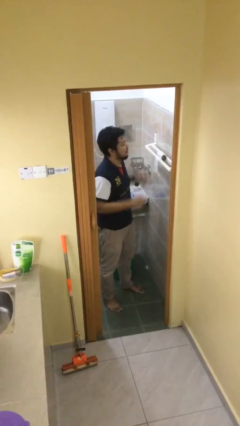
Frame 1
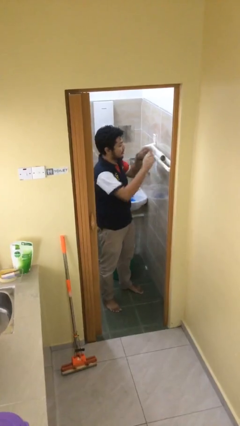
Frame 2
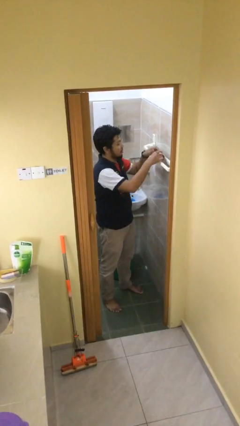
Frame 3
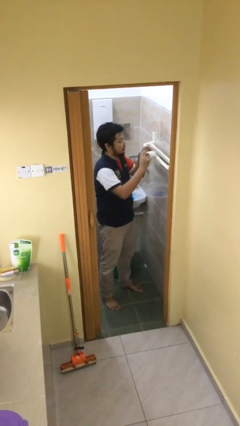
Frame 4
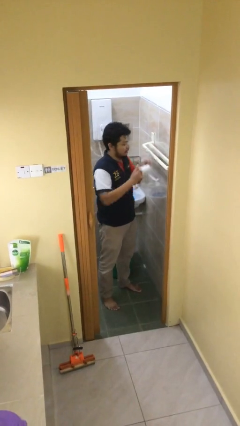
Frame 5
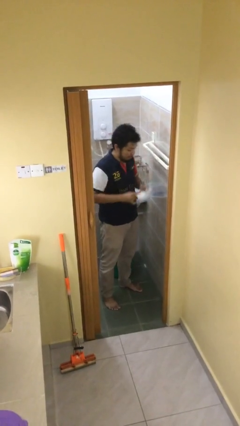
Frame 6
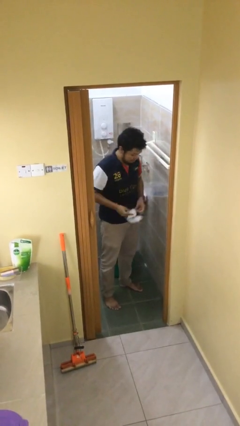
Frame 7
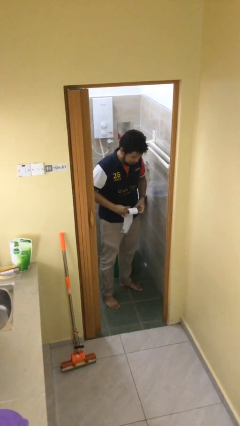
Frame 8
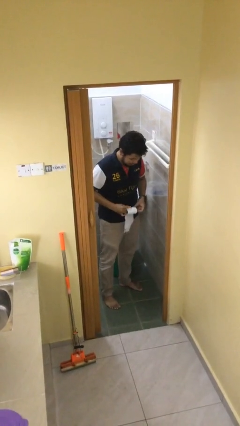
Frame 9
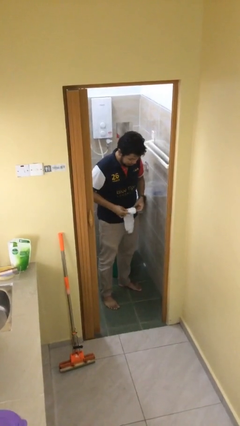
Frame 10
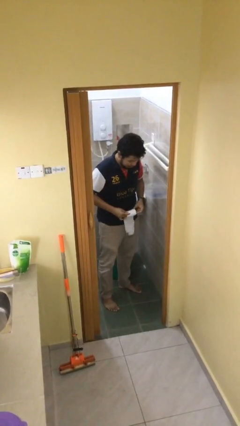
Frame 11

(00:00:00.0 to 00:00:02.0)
person picks up object from countertop

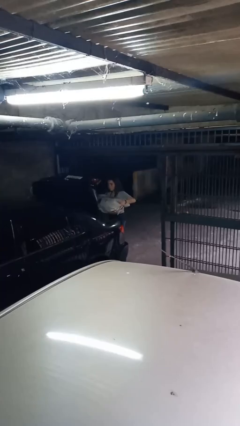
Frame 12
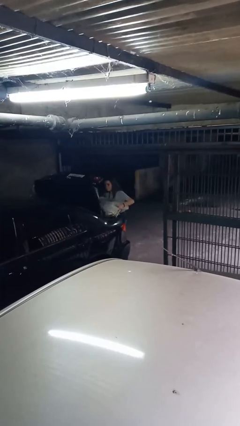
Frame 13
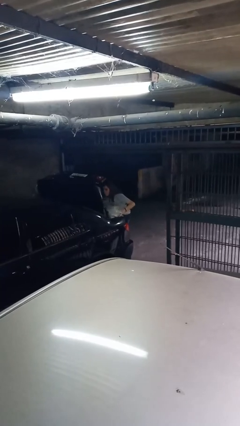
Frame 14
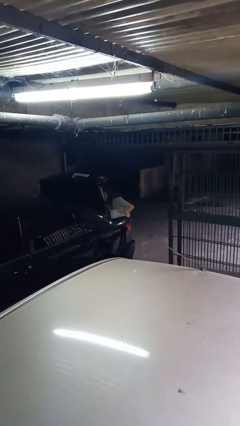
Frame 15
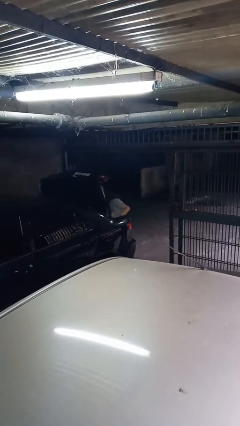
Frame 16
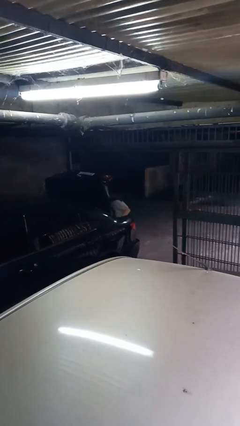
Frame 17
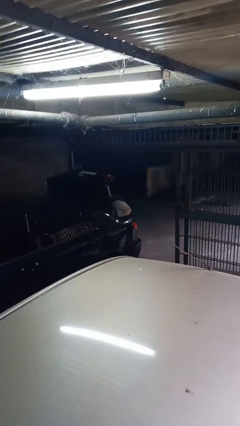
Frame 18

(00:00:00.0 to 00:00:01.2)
person loads car

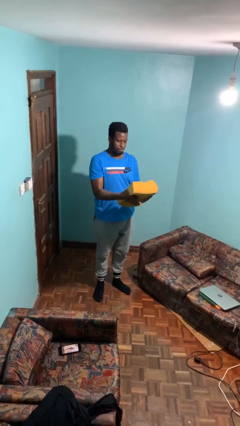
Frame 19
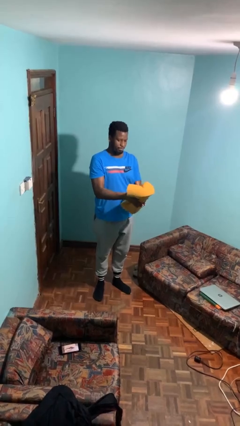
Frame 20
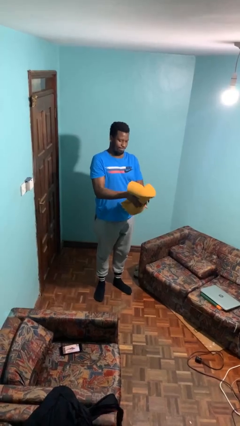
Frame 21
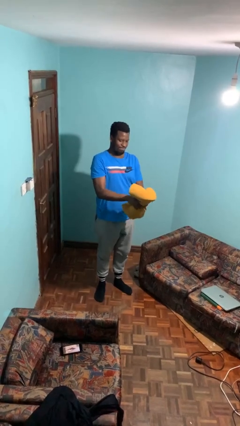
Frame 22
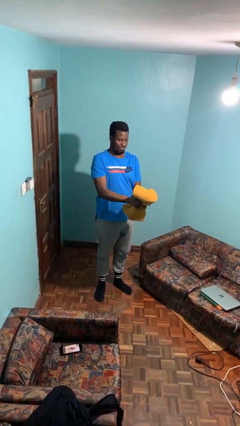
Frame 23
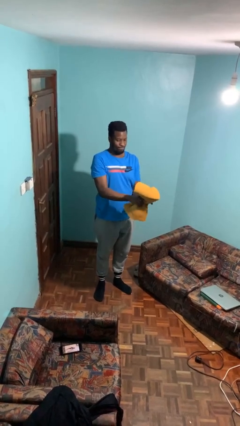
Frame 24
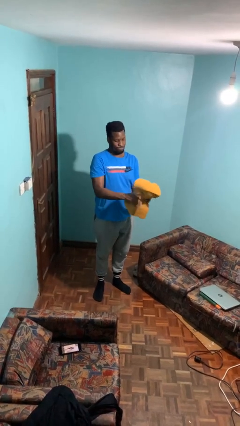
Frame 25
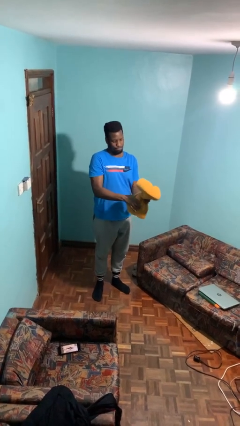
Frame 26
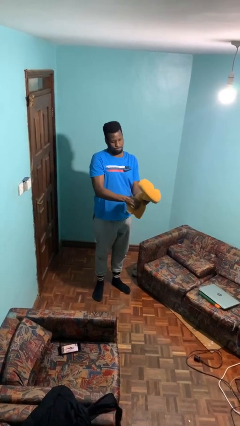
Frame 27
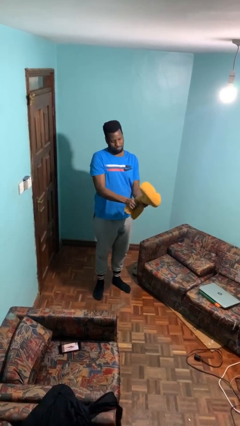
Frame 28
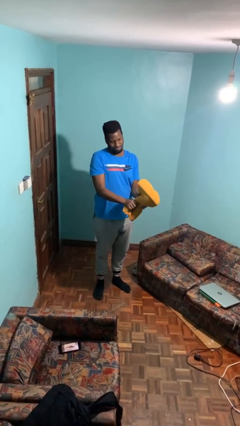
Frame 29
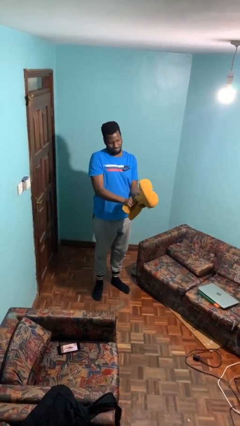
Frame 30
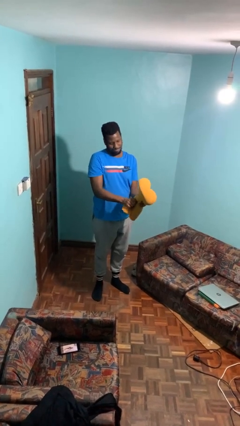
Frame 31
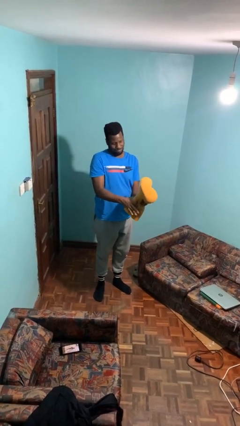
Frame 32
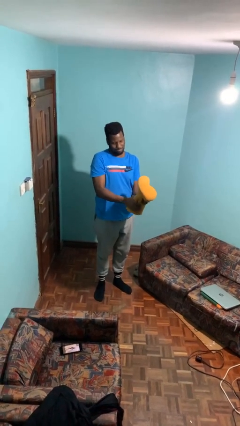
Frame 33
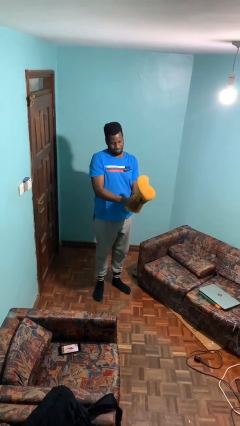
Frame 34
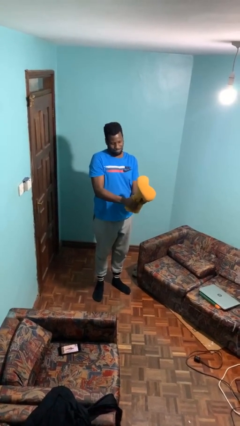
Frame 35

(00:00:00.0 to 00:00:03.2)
person squeezes object

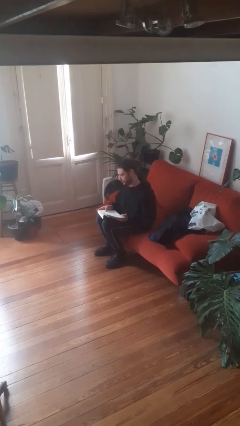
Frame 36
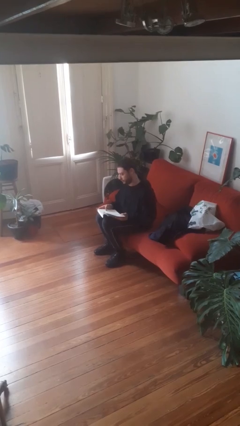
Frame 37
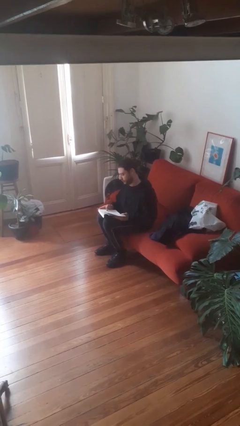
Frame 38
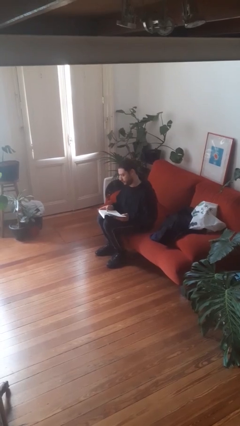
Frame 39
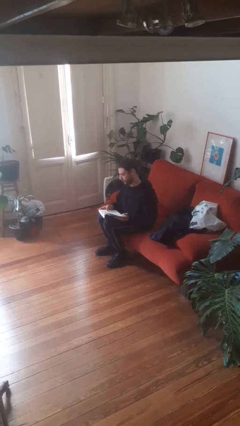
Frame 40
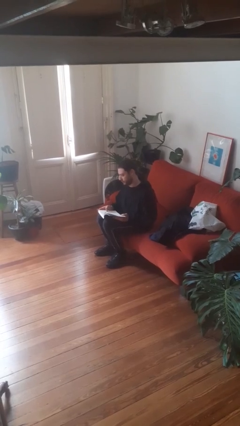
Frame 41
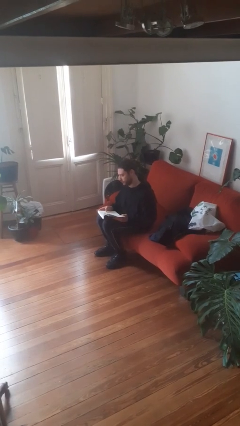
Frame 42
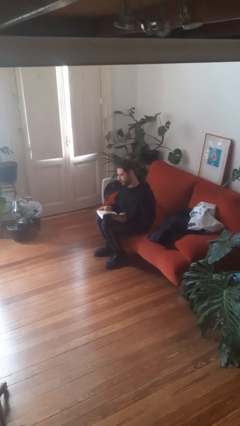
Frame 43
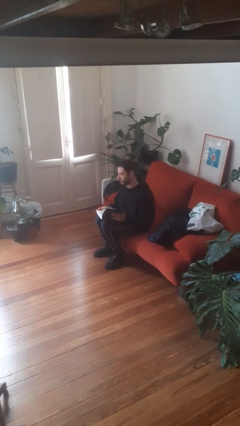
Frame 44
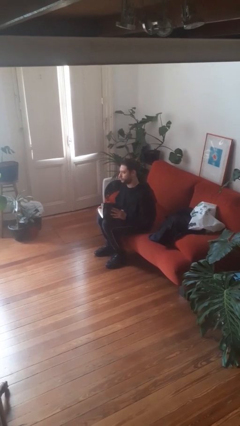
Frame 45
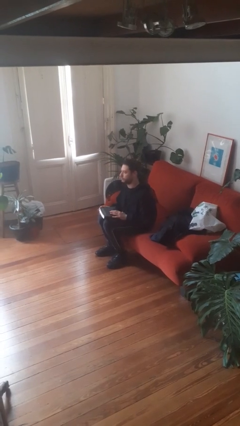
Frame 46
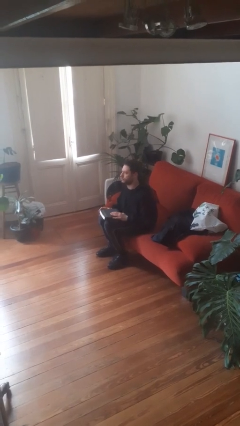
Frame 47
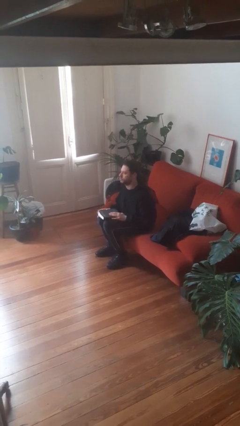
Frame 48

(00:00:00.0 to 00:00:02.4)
person reads book

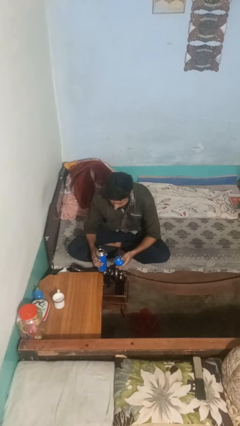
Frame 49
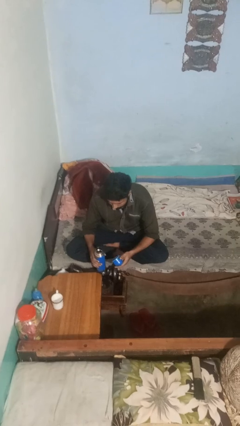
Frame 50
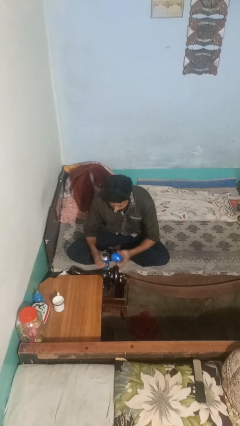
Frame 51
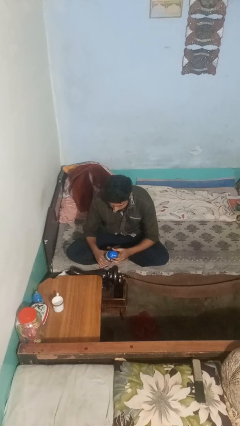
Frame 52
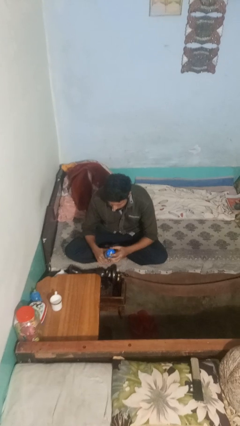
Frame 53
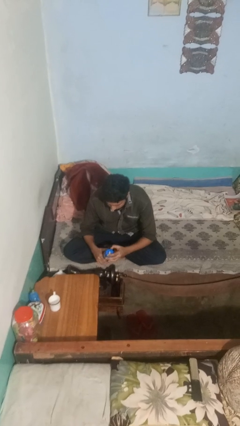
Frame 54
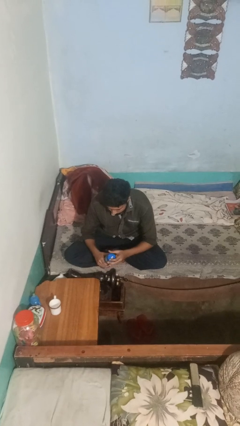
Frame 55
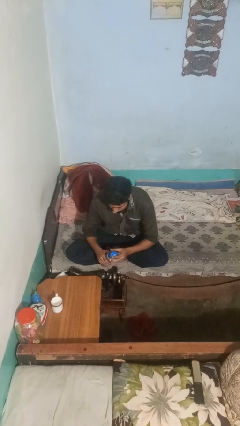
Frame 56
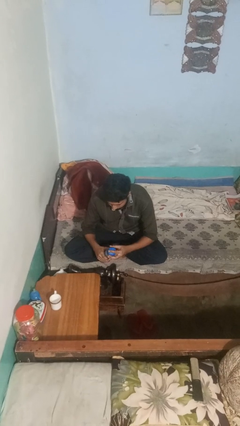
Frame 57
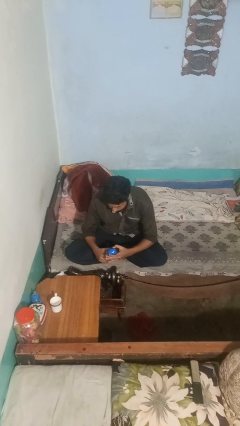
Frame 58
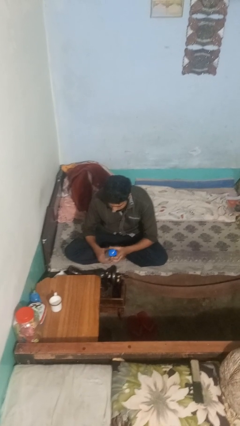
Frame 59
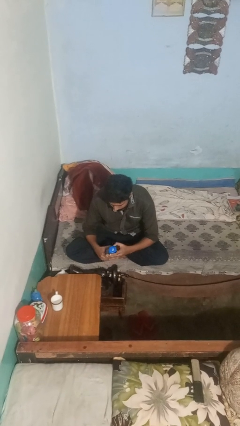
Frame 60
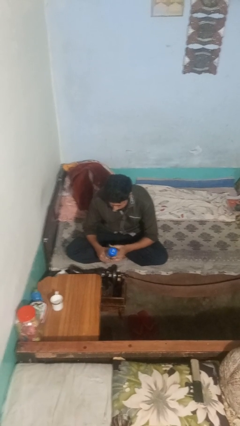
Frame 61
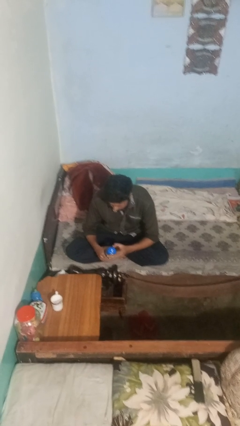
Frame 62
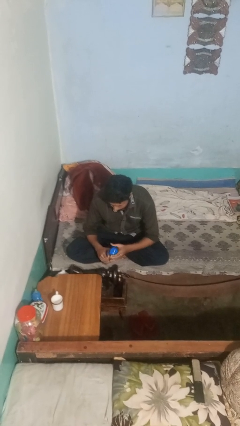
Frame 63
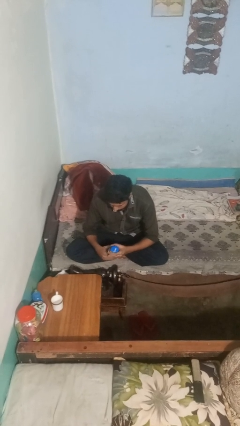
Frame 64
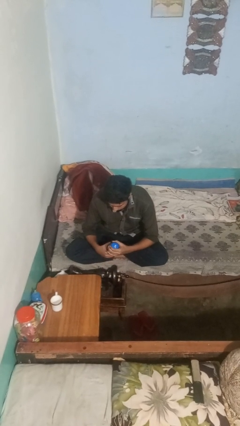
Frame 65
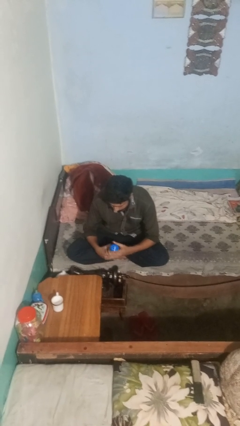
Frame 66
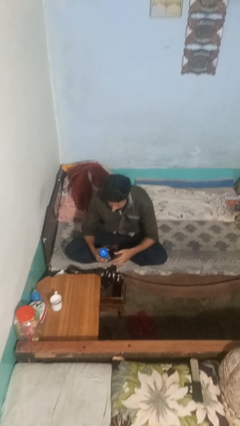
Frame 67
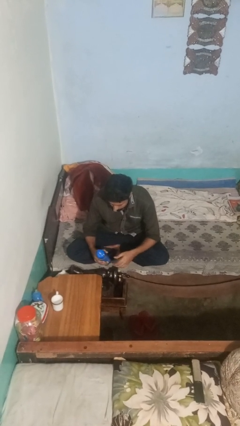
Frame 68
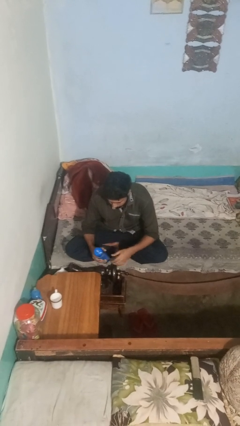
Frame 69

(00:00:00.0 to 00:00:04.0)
person screws lid to bottle

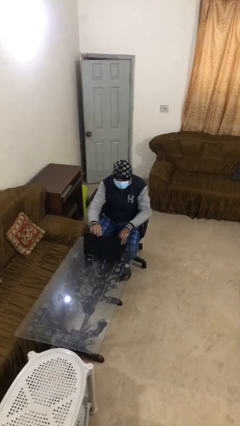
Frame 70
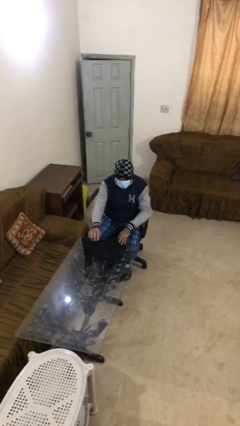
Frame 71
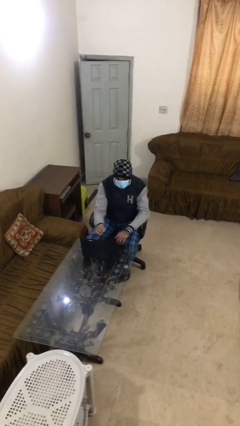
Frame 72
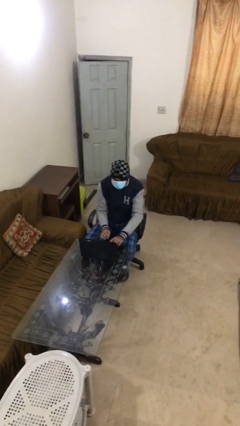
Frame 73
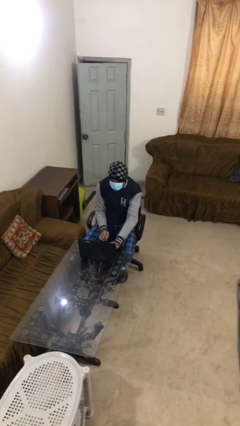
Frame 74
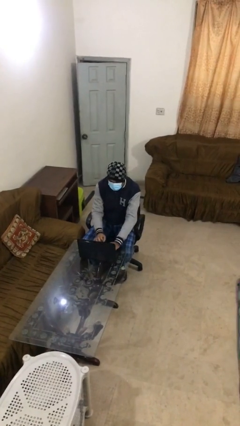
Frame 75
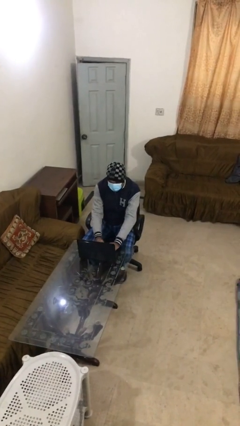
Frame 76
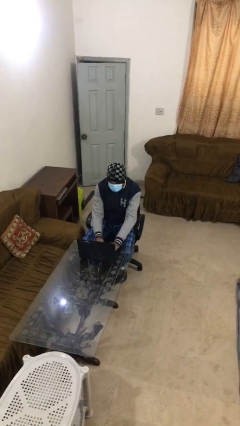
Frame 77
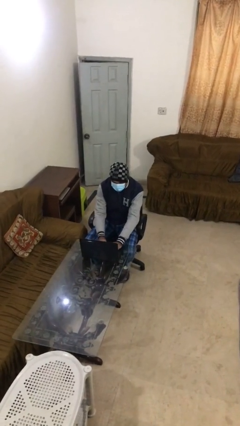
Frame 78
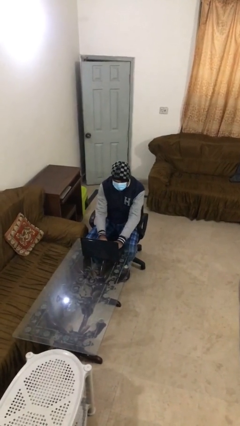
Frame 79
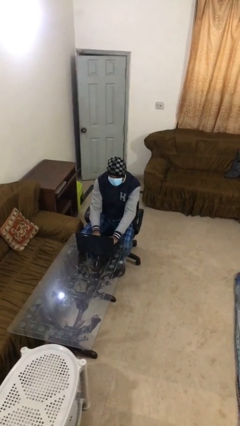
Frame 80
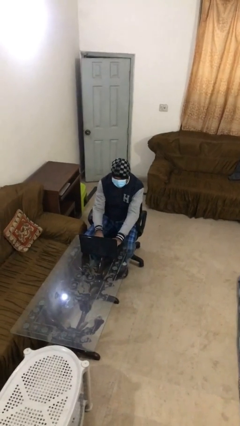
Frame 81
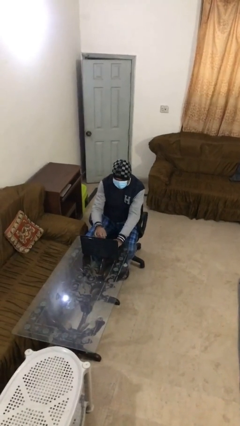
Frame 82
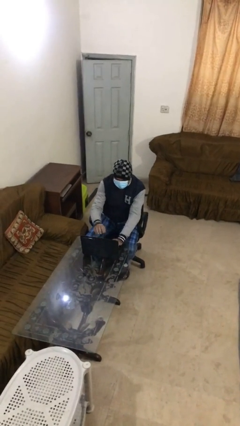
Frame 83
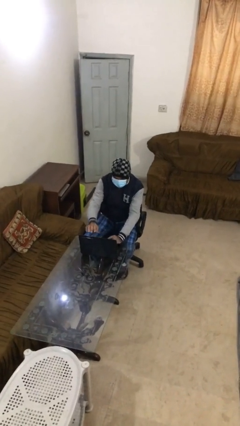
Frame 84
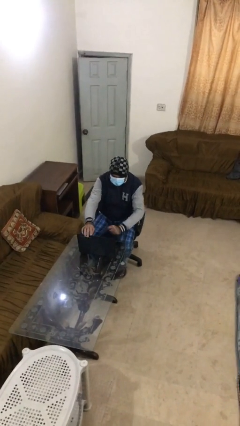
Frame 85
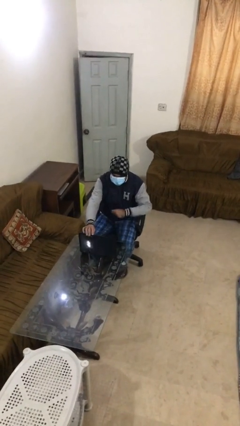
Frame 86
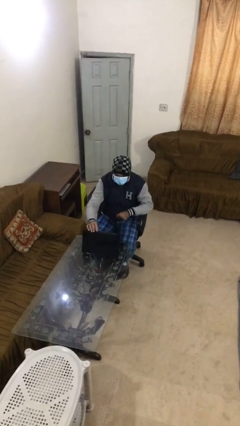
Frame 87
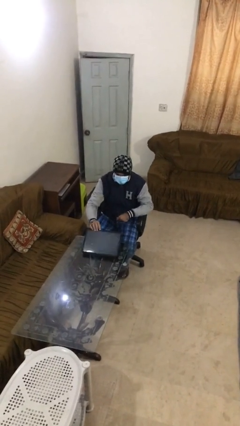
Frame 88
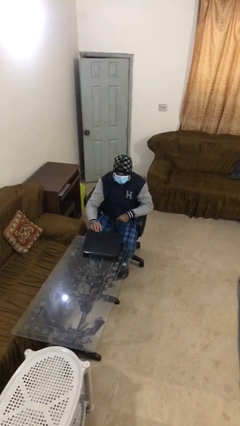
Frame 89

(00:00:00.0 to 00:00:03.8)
person interacts with laptop

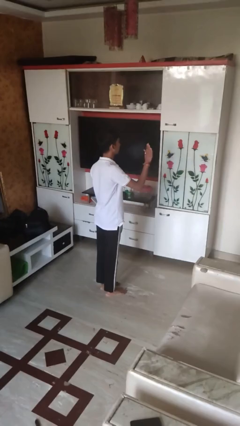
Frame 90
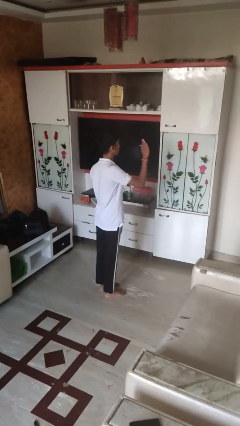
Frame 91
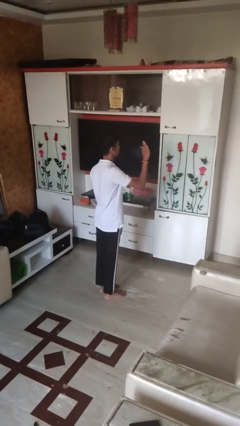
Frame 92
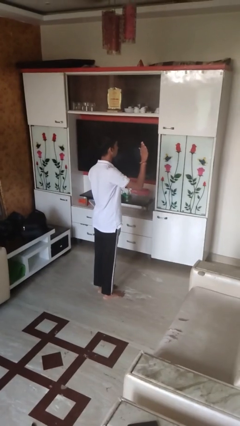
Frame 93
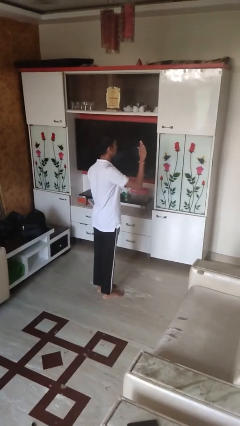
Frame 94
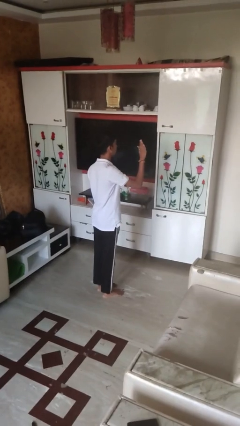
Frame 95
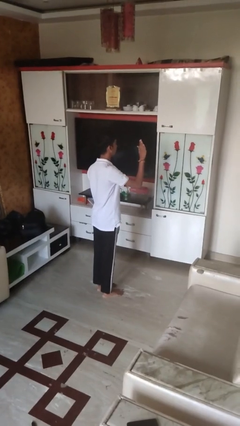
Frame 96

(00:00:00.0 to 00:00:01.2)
person gestures swipe up
